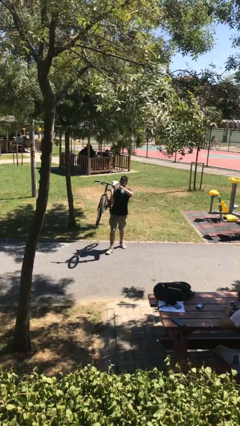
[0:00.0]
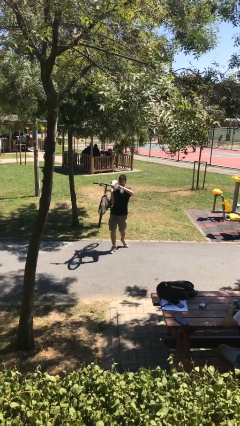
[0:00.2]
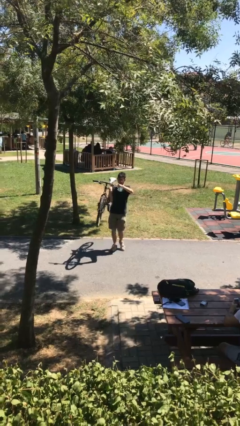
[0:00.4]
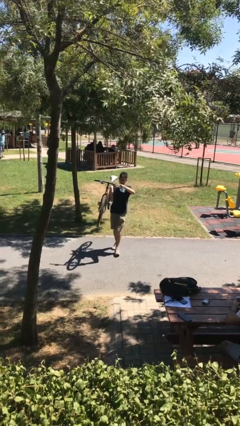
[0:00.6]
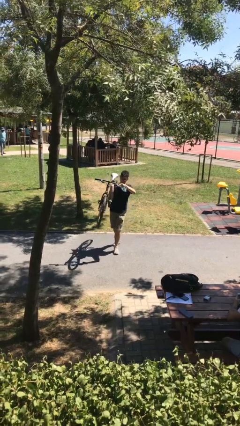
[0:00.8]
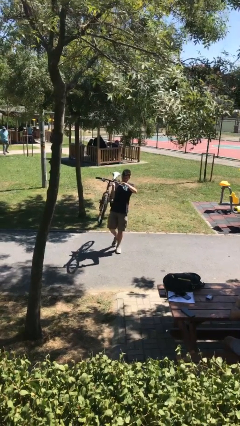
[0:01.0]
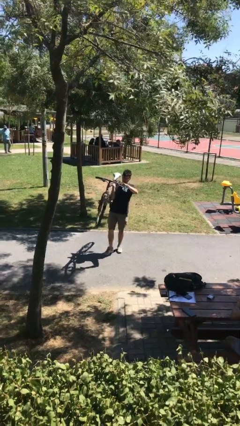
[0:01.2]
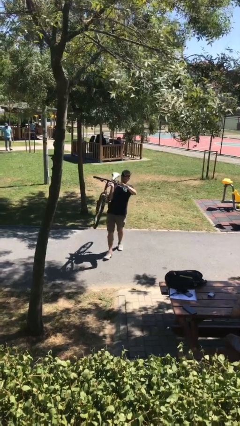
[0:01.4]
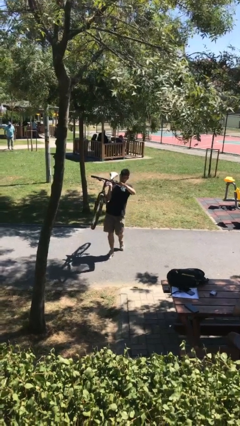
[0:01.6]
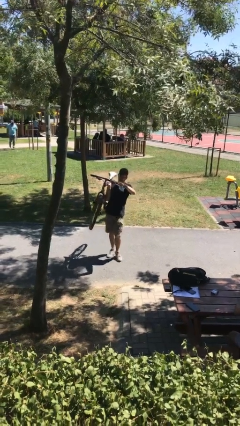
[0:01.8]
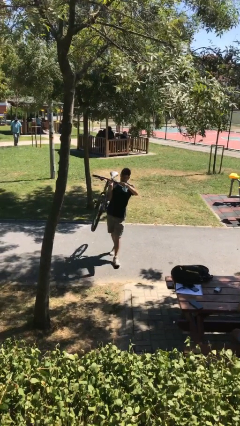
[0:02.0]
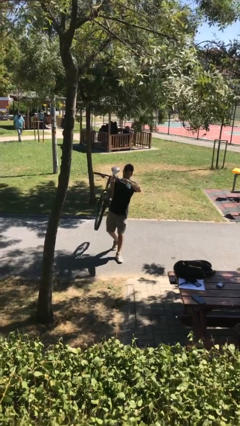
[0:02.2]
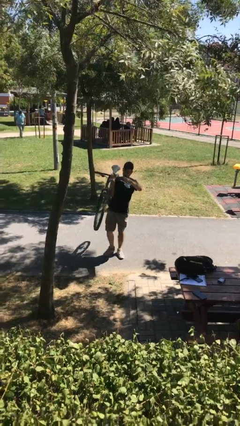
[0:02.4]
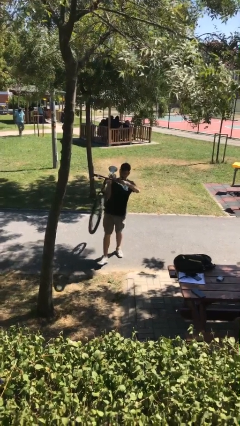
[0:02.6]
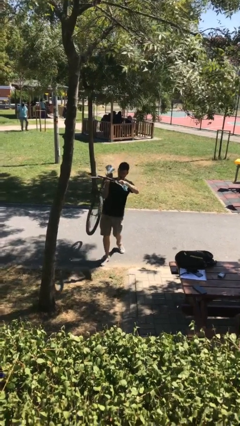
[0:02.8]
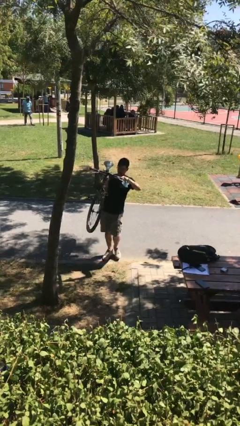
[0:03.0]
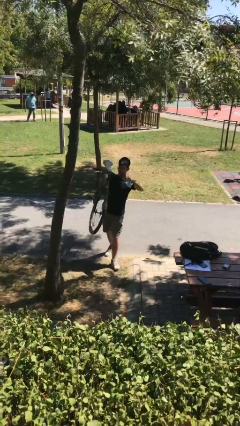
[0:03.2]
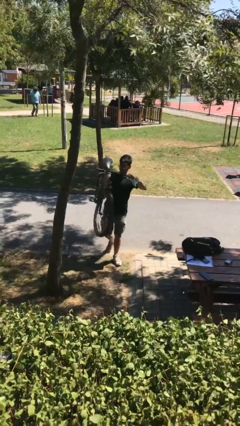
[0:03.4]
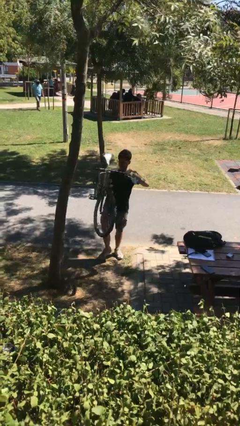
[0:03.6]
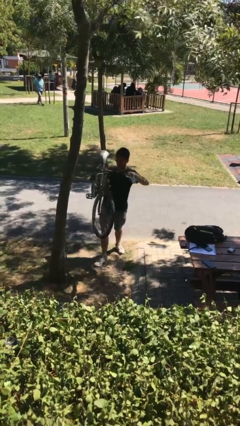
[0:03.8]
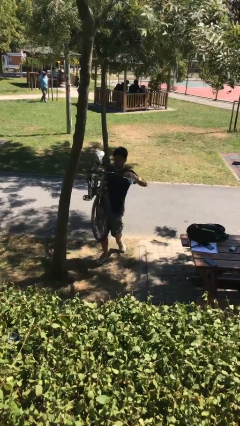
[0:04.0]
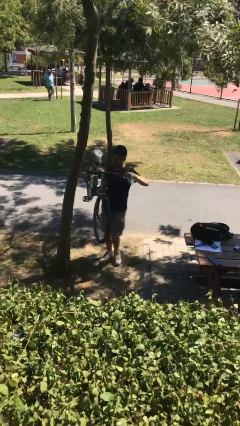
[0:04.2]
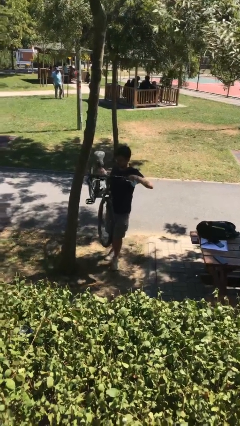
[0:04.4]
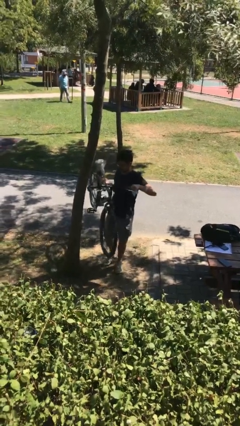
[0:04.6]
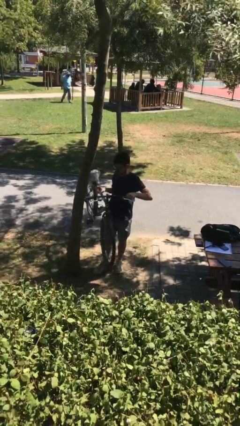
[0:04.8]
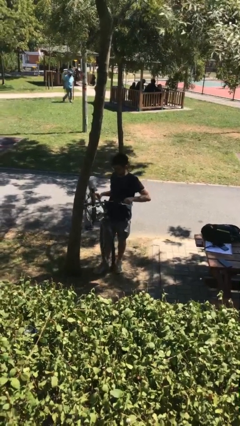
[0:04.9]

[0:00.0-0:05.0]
person carries heavy object

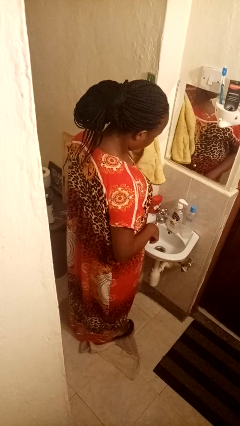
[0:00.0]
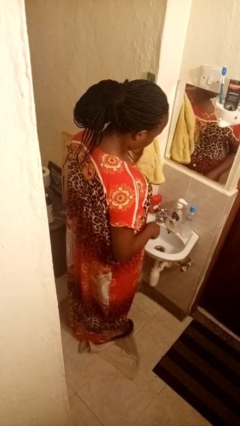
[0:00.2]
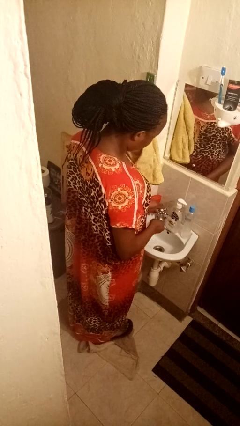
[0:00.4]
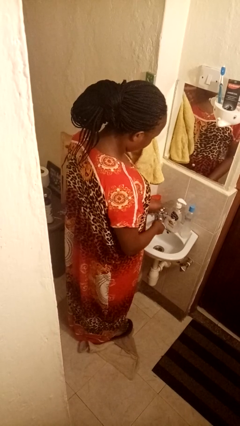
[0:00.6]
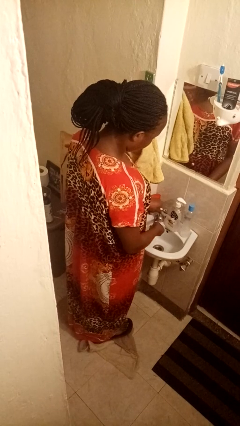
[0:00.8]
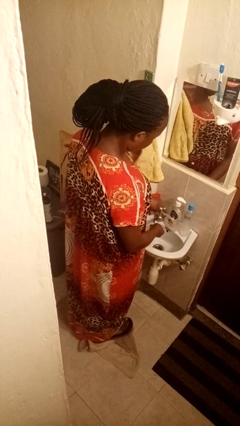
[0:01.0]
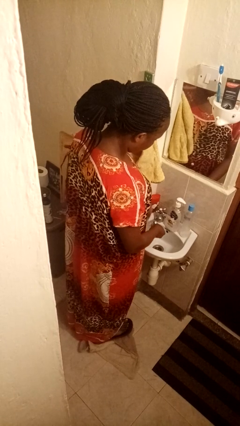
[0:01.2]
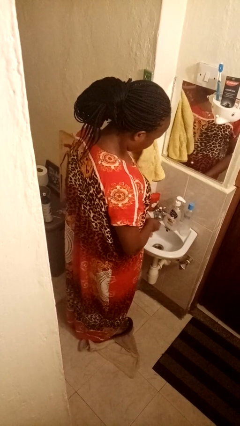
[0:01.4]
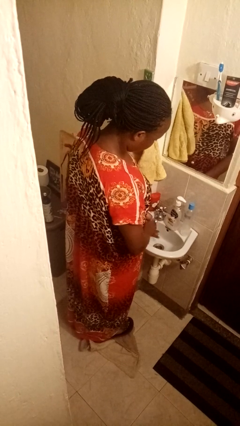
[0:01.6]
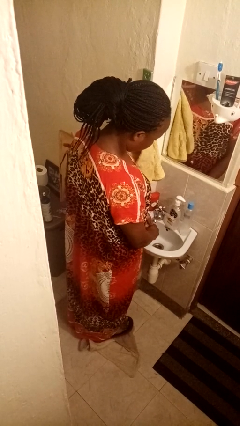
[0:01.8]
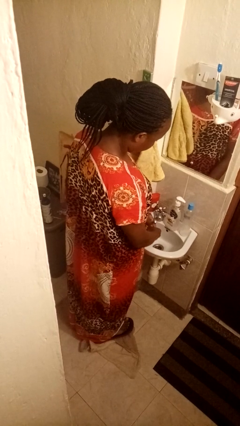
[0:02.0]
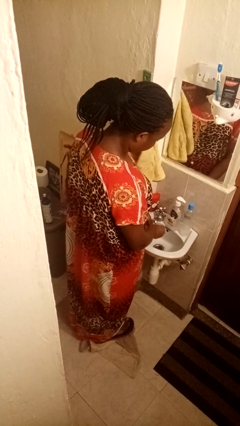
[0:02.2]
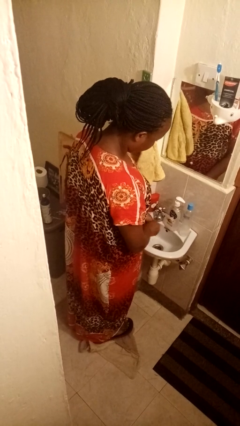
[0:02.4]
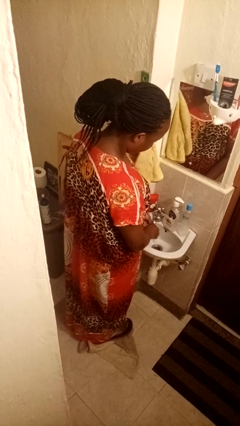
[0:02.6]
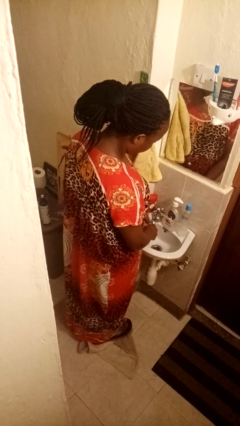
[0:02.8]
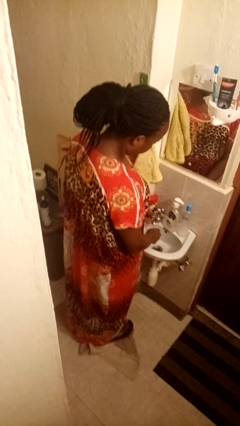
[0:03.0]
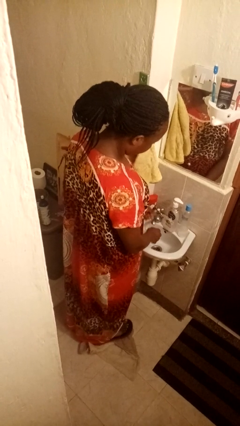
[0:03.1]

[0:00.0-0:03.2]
person washes hands

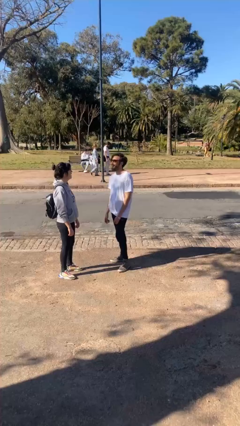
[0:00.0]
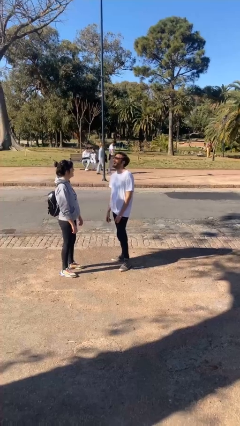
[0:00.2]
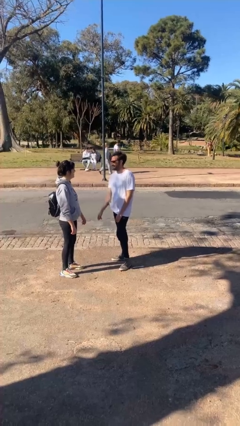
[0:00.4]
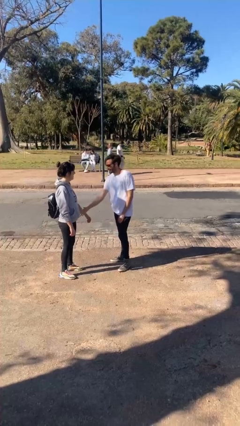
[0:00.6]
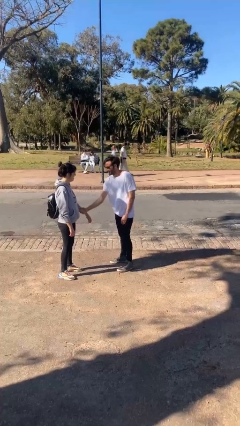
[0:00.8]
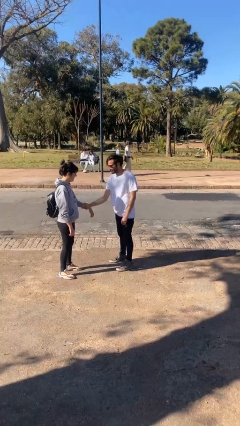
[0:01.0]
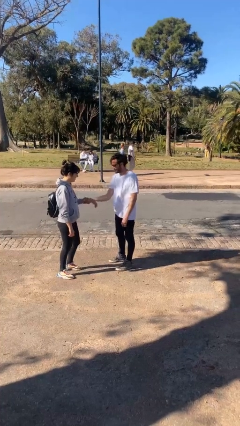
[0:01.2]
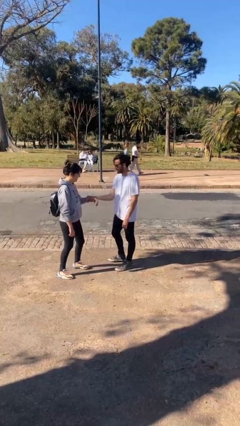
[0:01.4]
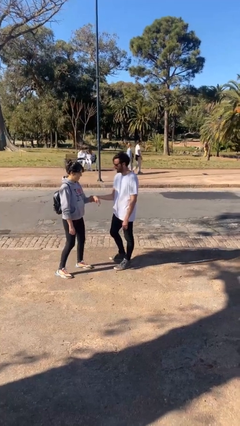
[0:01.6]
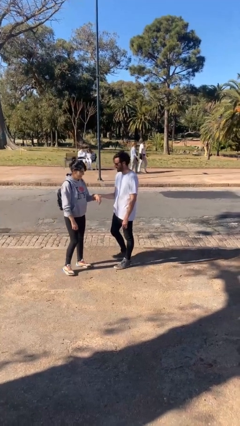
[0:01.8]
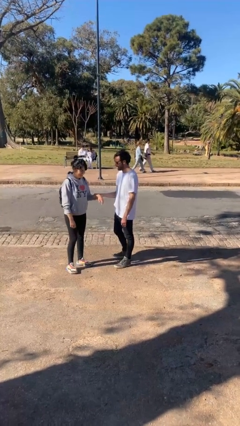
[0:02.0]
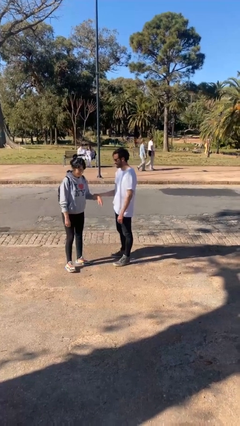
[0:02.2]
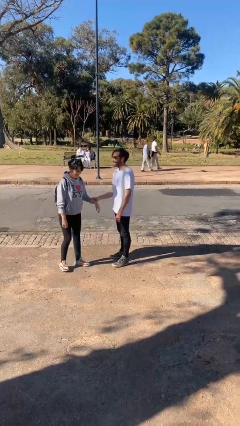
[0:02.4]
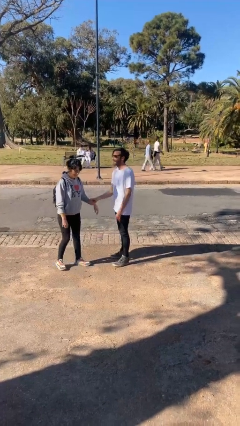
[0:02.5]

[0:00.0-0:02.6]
person grabs person by forearm

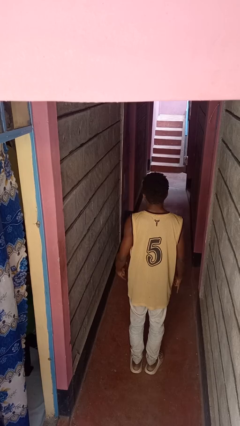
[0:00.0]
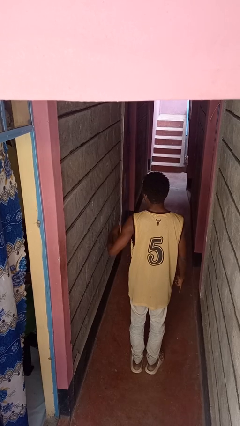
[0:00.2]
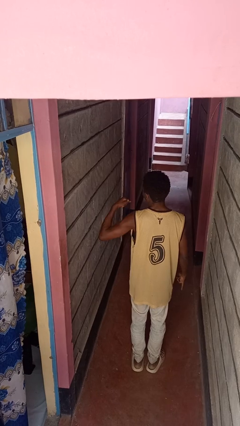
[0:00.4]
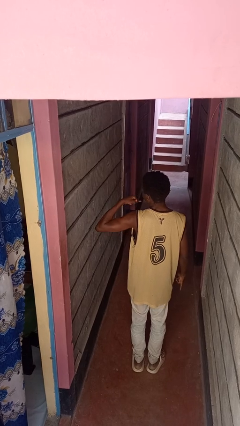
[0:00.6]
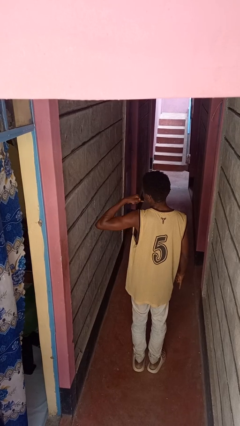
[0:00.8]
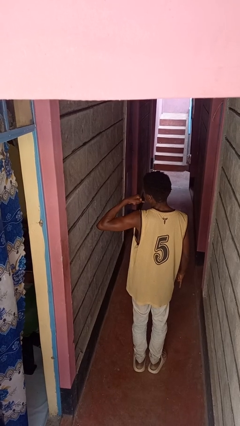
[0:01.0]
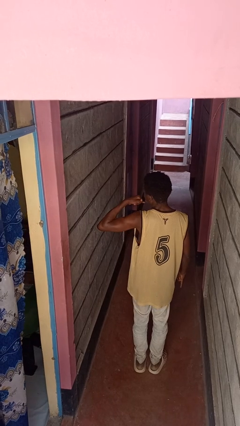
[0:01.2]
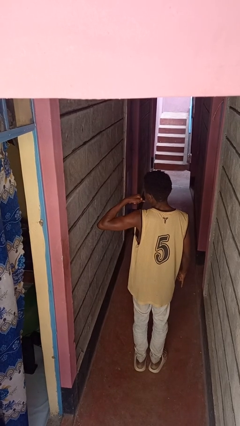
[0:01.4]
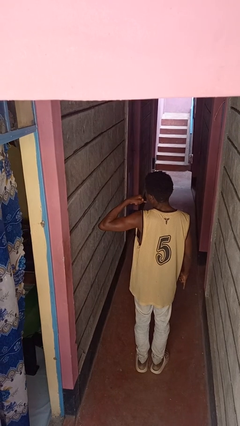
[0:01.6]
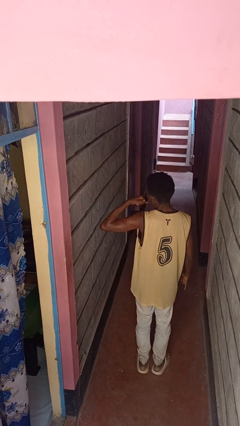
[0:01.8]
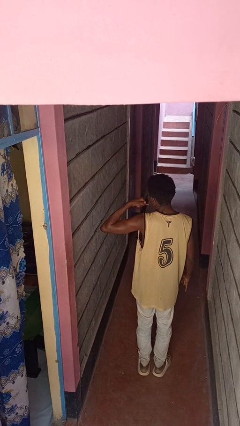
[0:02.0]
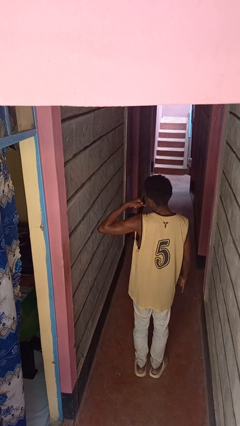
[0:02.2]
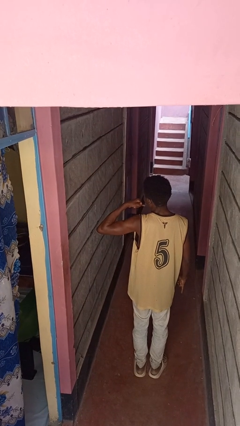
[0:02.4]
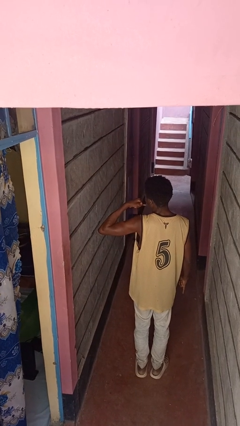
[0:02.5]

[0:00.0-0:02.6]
person gestures call me

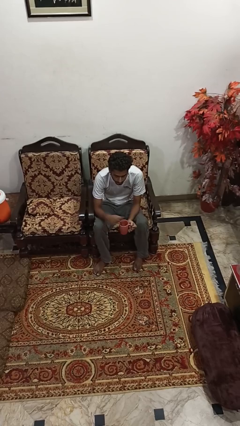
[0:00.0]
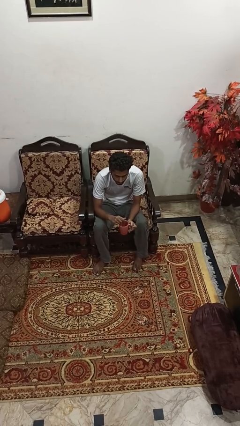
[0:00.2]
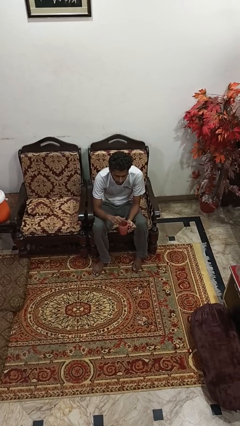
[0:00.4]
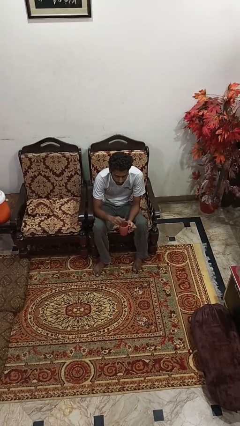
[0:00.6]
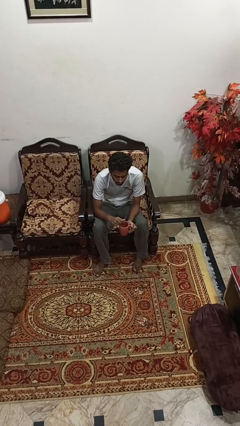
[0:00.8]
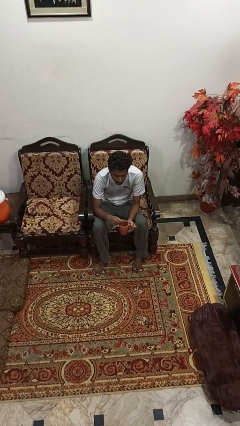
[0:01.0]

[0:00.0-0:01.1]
person stirs mug

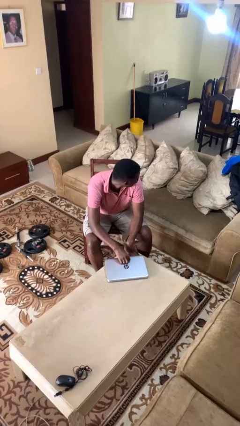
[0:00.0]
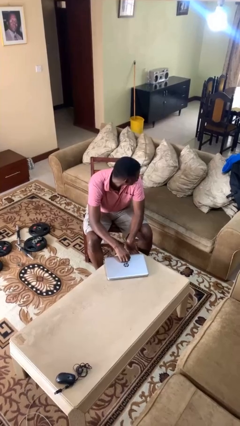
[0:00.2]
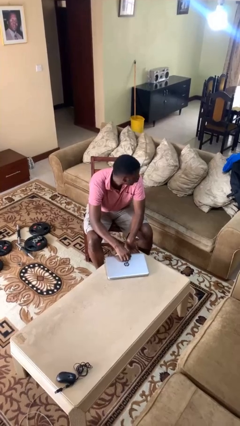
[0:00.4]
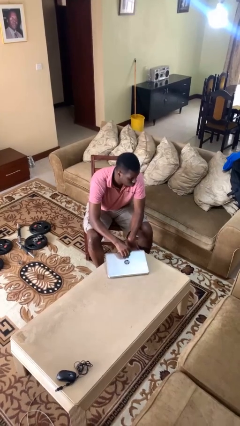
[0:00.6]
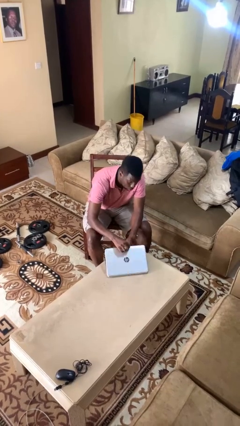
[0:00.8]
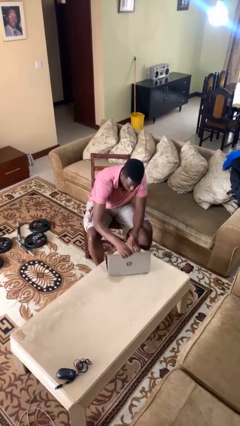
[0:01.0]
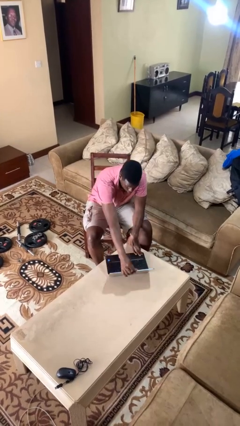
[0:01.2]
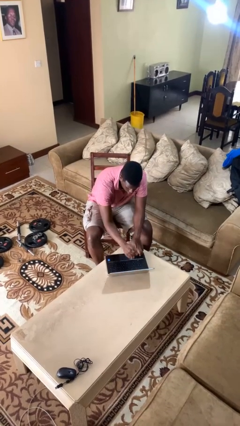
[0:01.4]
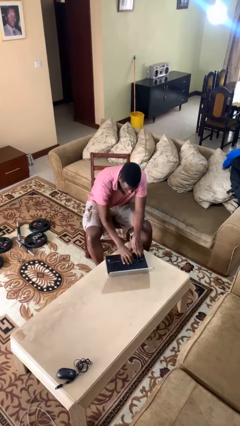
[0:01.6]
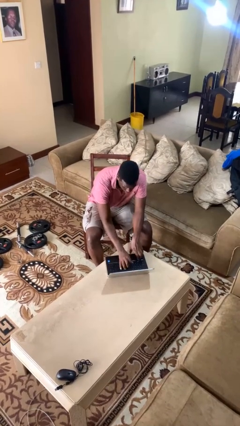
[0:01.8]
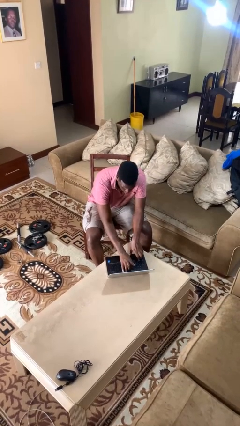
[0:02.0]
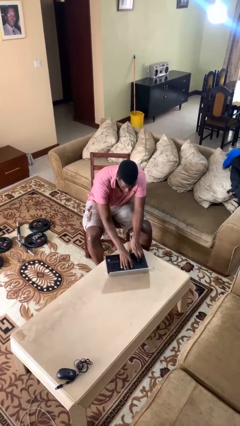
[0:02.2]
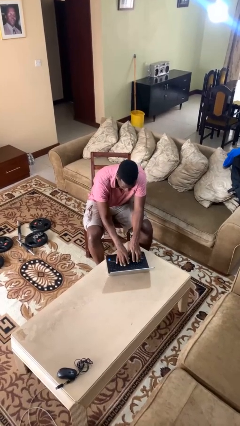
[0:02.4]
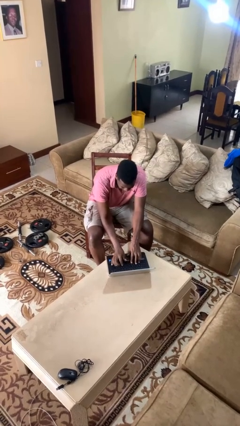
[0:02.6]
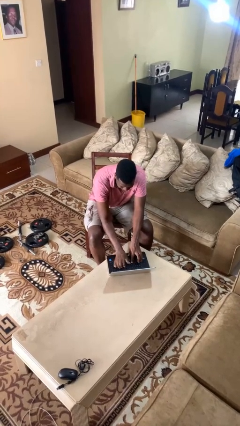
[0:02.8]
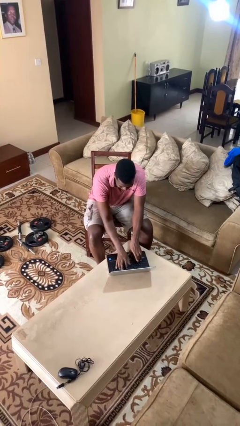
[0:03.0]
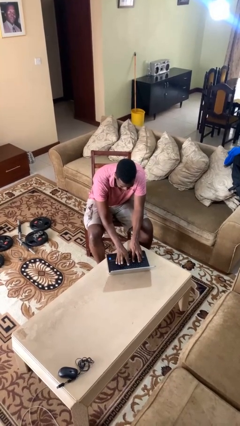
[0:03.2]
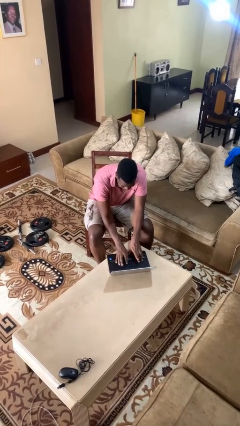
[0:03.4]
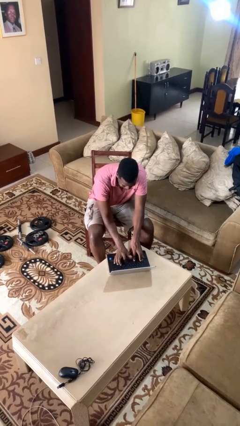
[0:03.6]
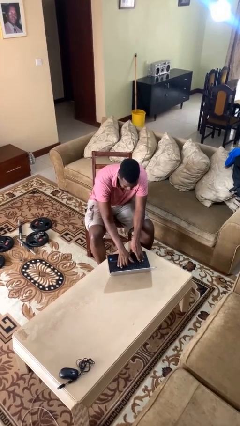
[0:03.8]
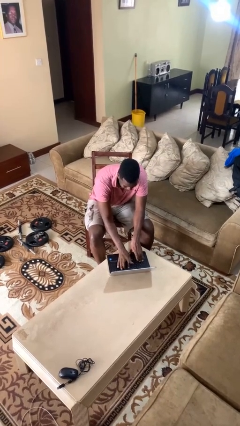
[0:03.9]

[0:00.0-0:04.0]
person interacts with laptop
